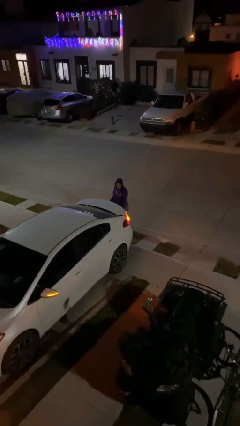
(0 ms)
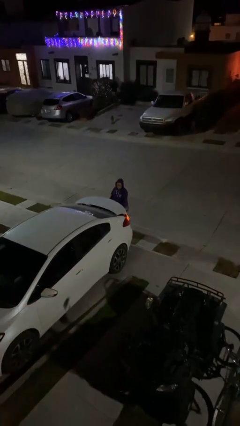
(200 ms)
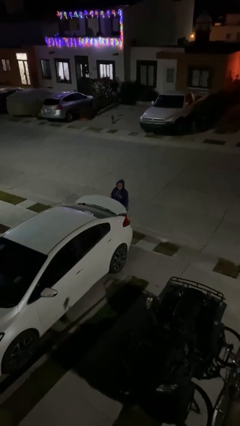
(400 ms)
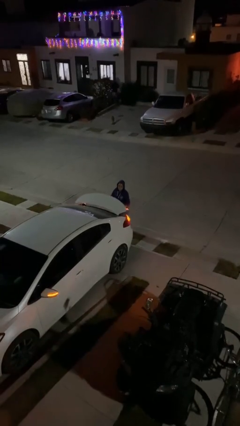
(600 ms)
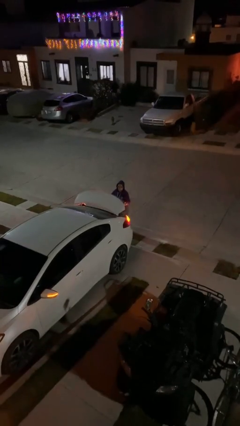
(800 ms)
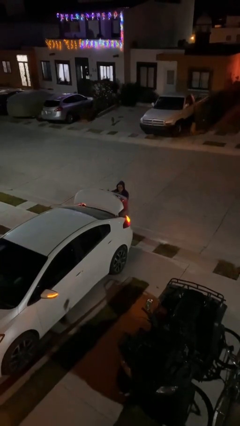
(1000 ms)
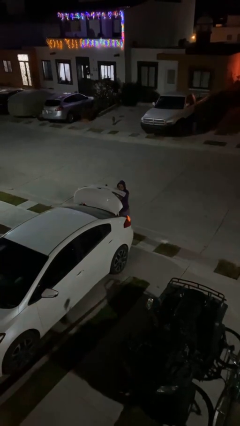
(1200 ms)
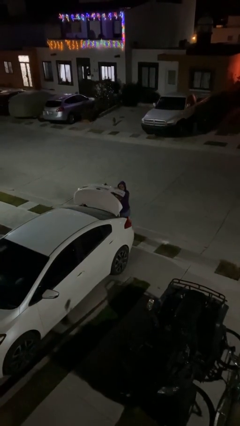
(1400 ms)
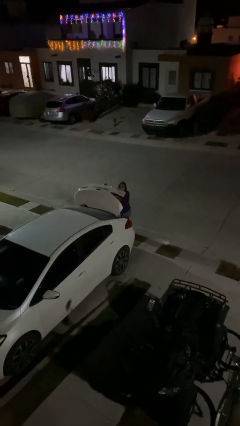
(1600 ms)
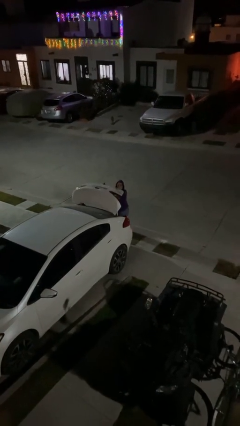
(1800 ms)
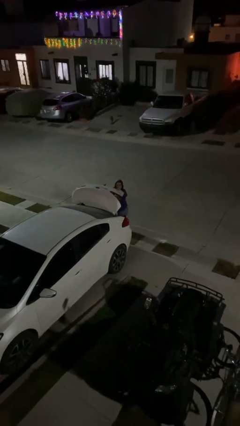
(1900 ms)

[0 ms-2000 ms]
person opens car trunk

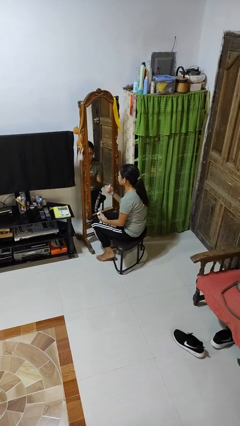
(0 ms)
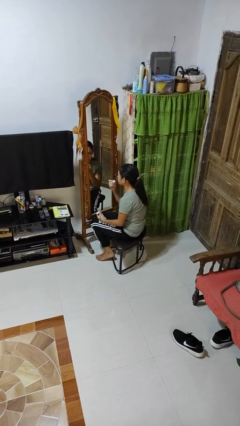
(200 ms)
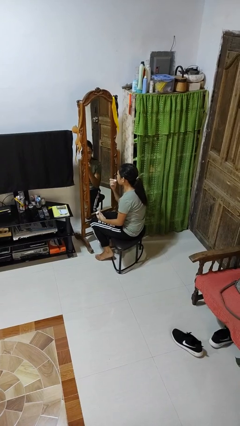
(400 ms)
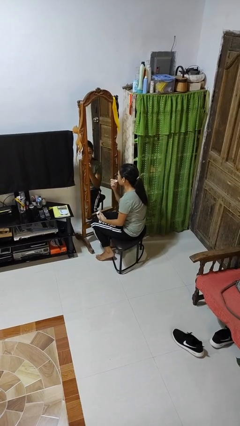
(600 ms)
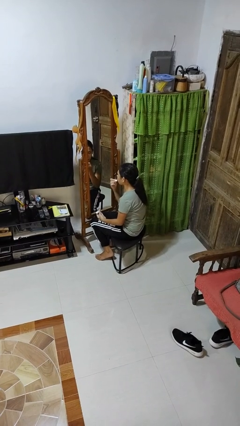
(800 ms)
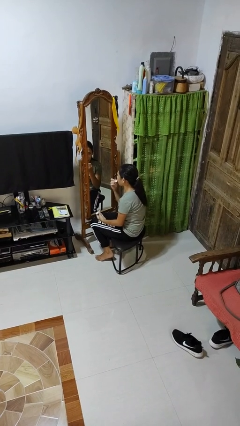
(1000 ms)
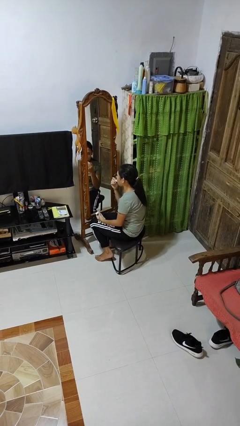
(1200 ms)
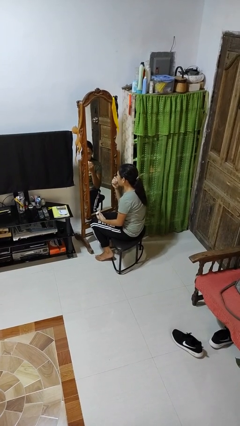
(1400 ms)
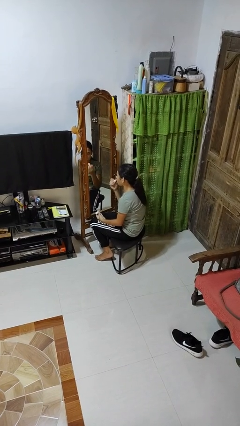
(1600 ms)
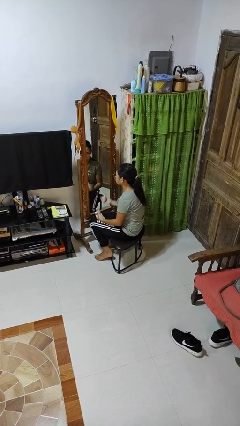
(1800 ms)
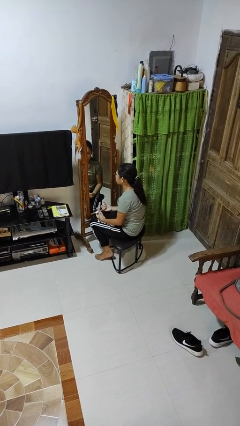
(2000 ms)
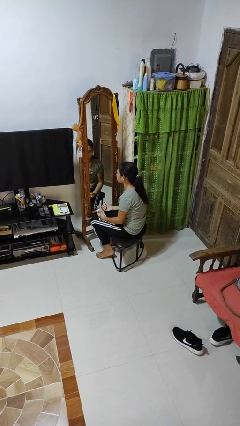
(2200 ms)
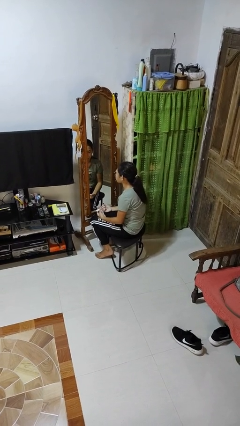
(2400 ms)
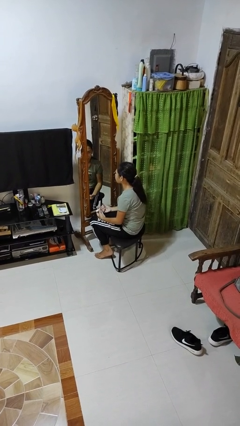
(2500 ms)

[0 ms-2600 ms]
person applies lip makeup

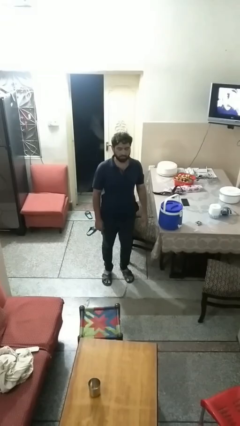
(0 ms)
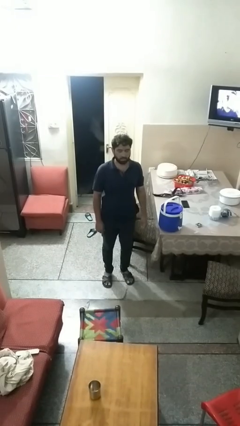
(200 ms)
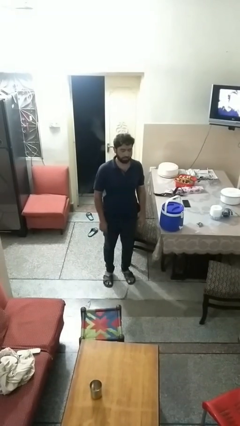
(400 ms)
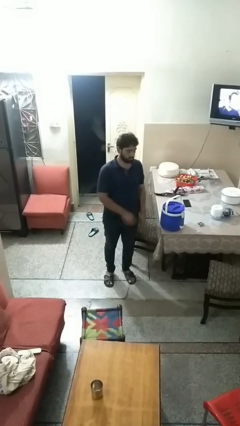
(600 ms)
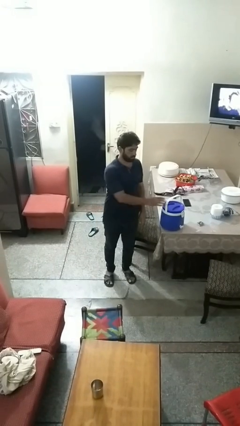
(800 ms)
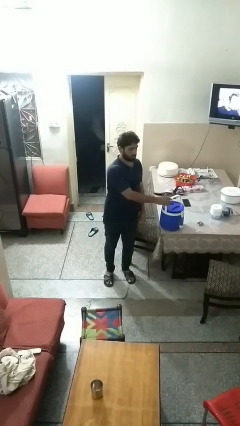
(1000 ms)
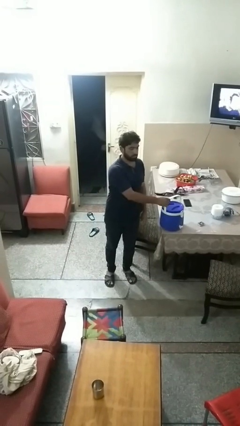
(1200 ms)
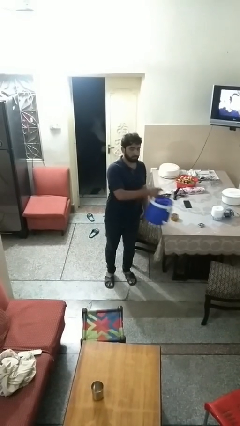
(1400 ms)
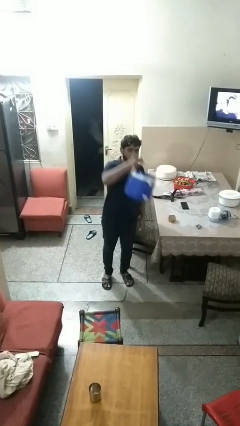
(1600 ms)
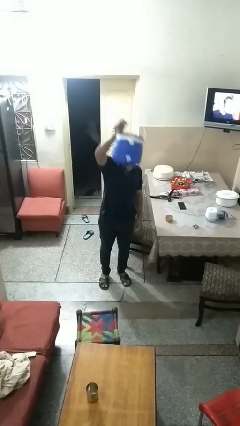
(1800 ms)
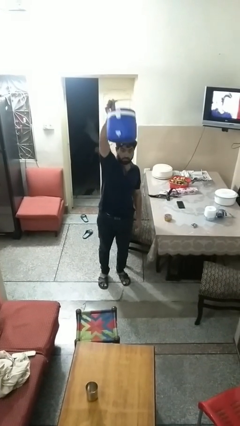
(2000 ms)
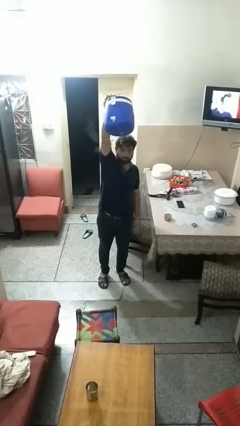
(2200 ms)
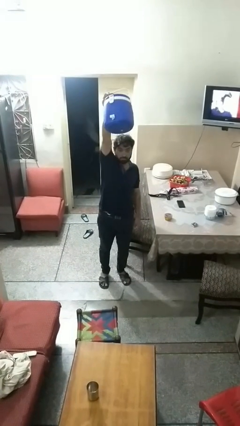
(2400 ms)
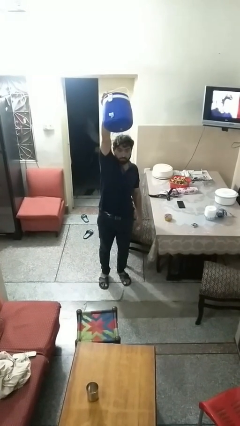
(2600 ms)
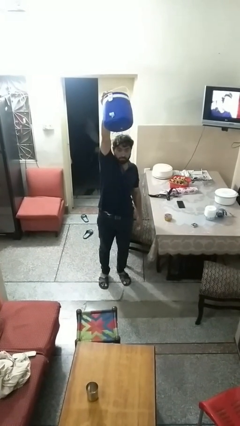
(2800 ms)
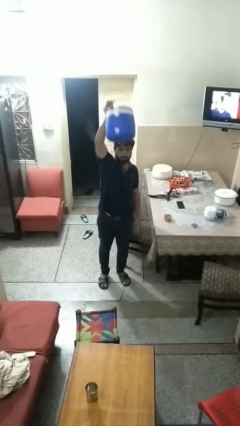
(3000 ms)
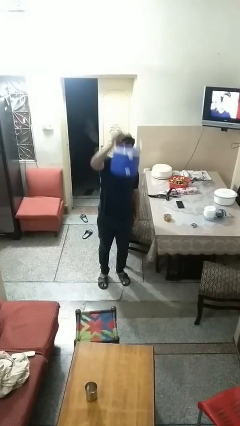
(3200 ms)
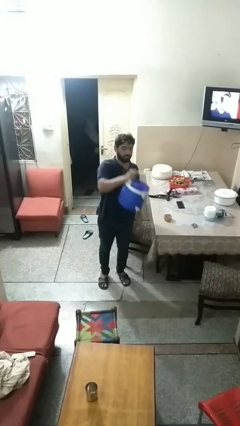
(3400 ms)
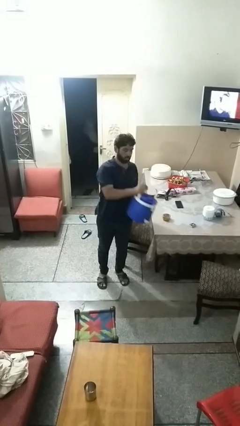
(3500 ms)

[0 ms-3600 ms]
person holds object above head

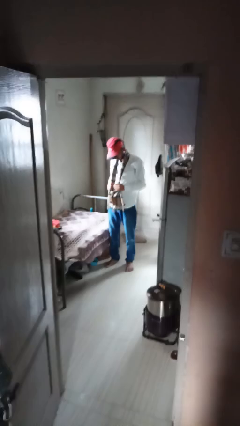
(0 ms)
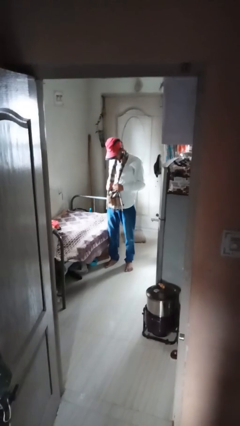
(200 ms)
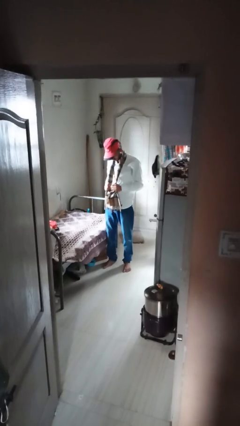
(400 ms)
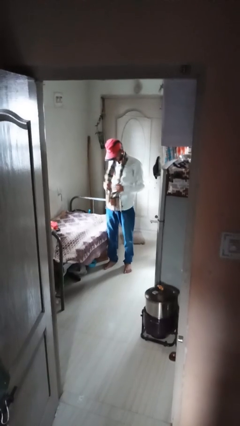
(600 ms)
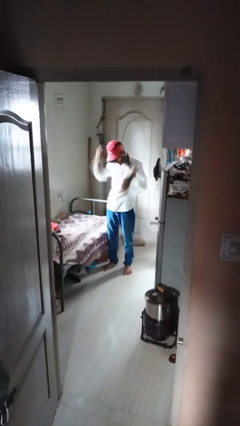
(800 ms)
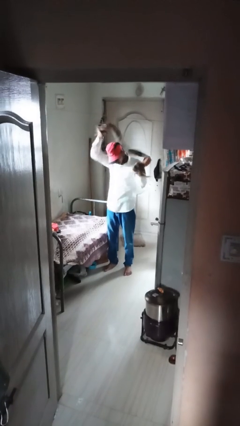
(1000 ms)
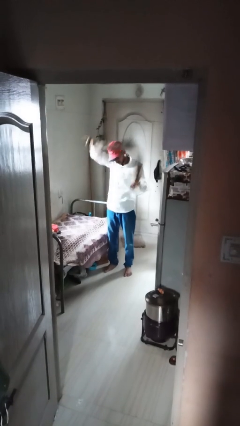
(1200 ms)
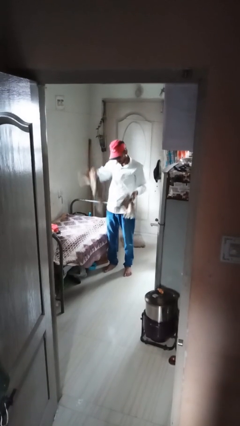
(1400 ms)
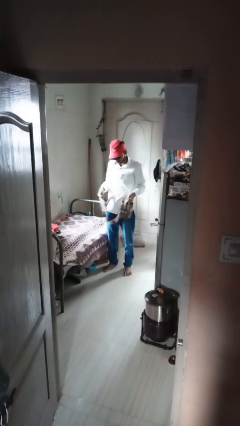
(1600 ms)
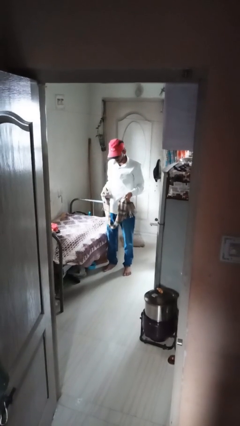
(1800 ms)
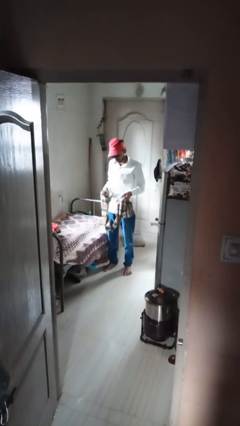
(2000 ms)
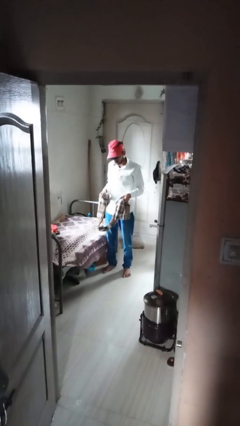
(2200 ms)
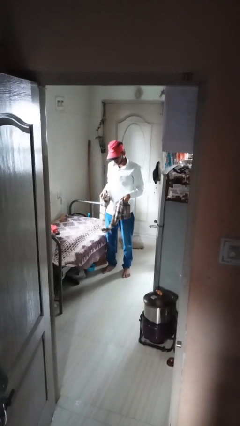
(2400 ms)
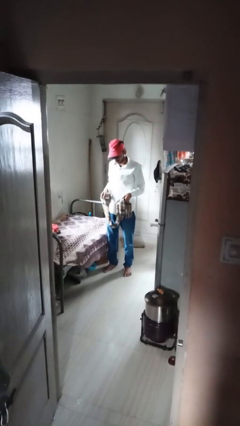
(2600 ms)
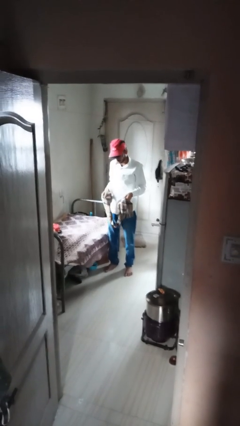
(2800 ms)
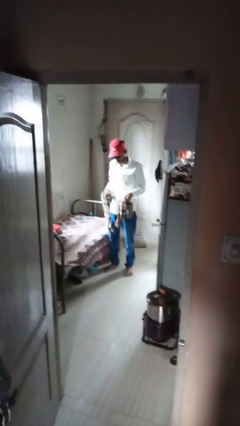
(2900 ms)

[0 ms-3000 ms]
person takes off scarf

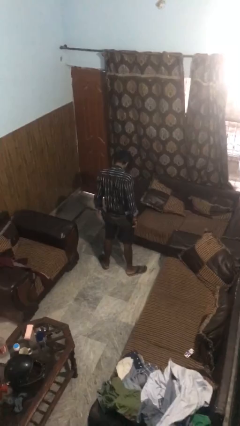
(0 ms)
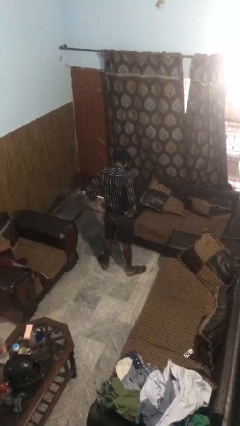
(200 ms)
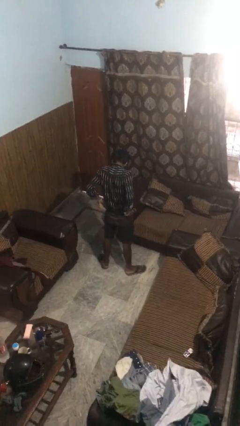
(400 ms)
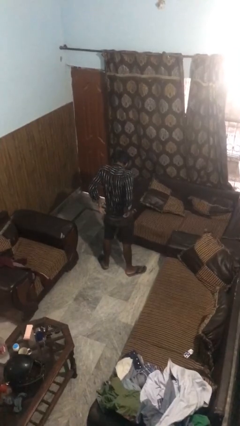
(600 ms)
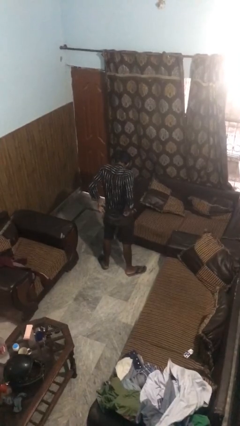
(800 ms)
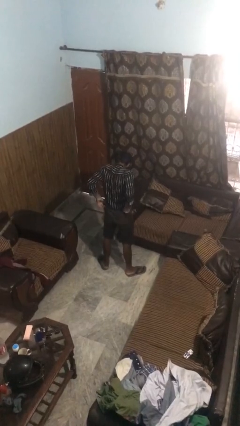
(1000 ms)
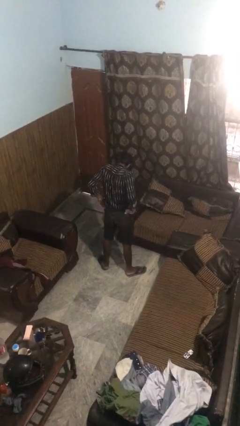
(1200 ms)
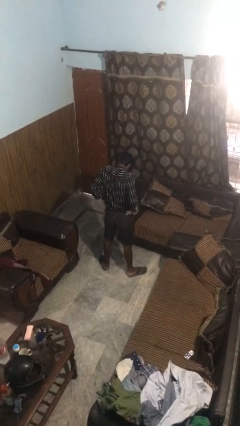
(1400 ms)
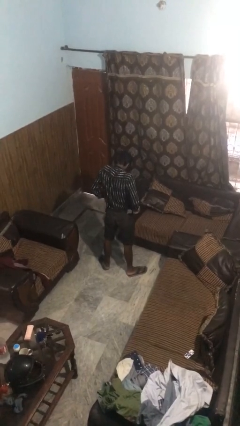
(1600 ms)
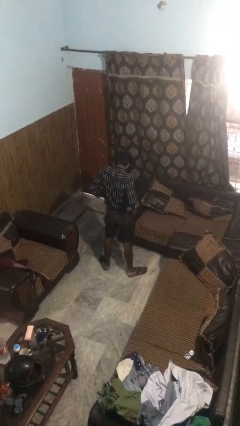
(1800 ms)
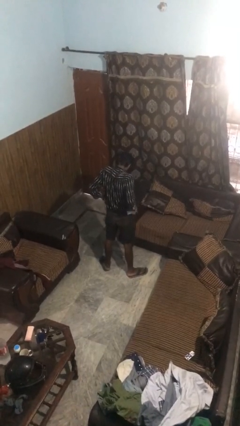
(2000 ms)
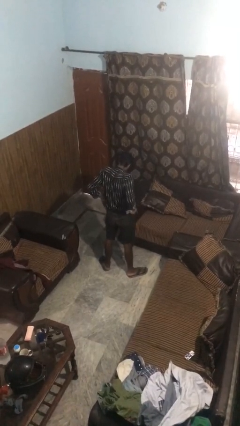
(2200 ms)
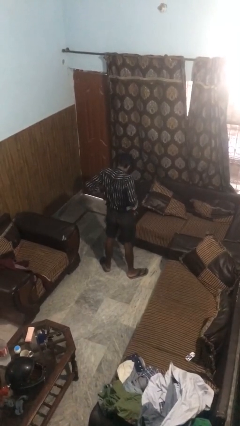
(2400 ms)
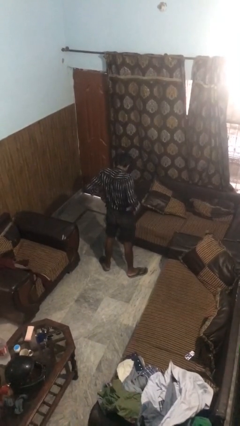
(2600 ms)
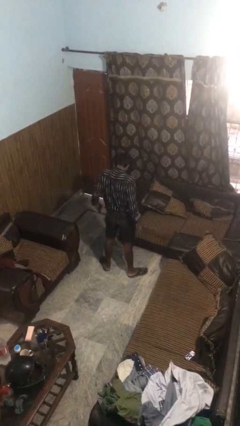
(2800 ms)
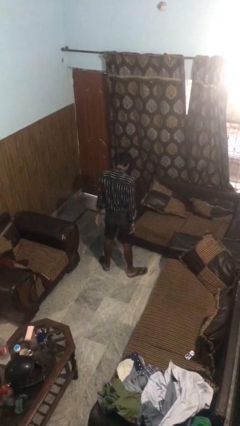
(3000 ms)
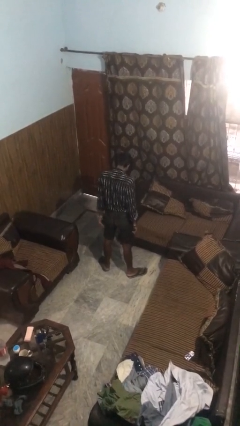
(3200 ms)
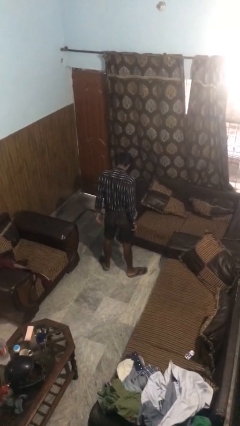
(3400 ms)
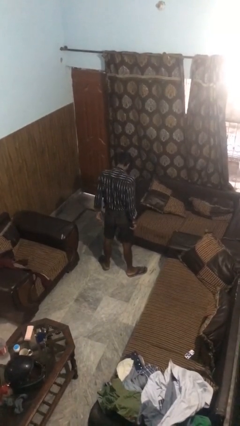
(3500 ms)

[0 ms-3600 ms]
person hikes up pants

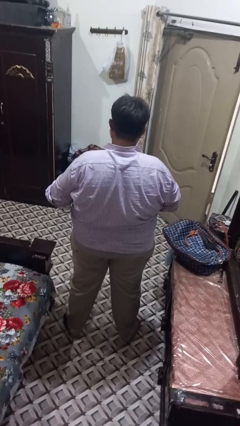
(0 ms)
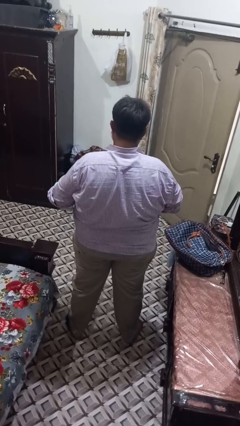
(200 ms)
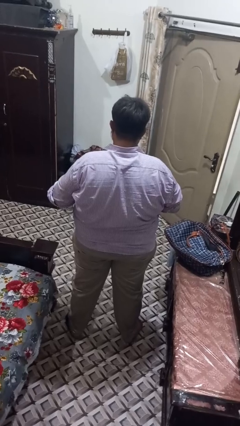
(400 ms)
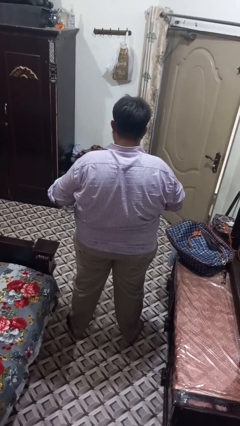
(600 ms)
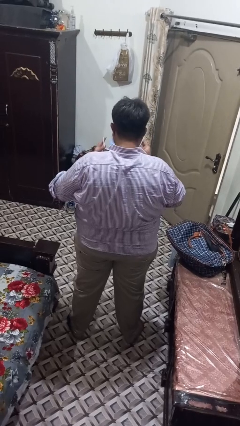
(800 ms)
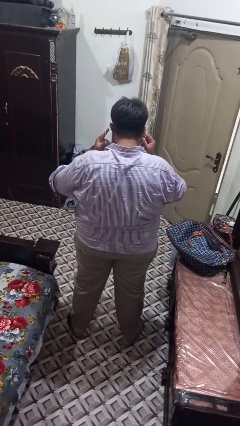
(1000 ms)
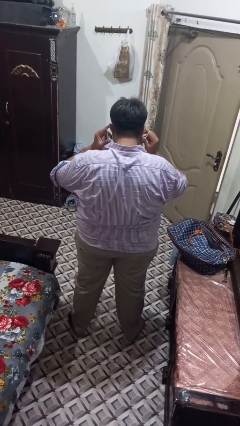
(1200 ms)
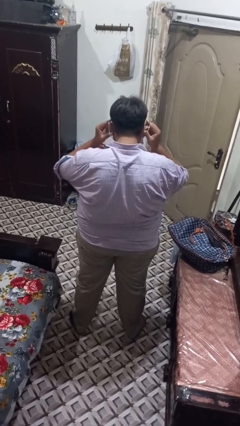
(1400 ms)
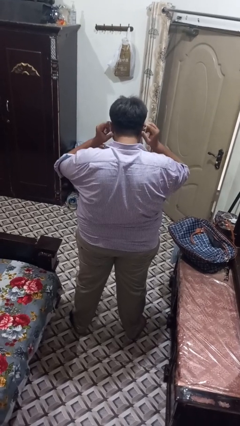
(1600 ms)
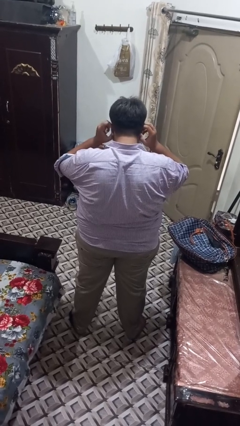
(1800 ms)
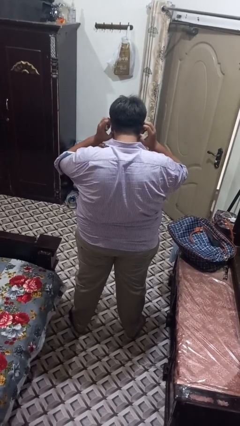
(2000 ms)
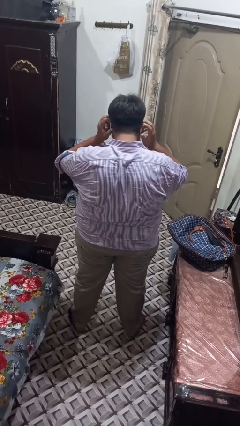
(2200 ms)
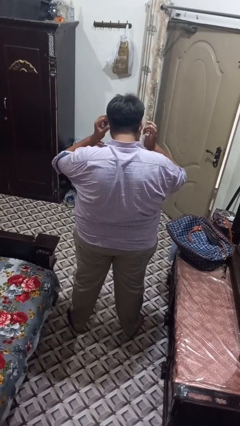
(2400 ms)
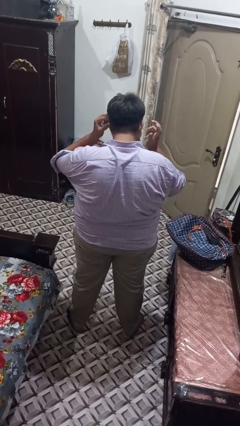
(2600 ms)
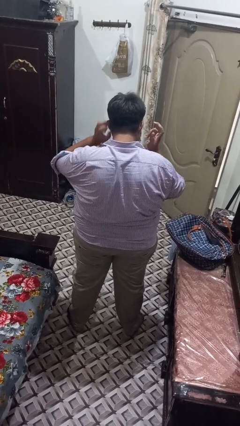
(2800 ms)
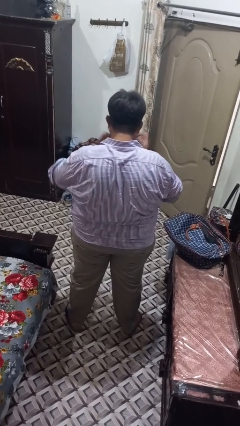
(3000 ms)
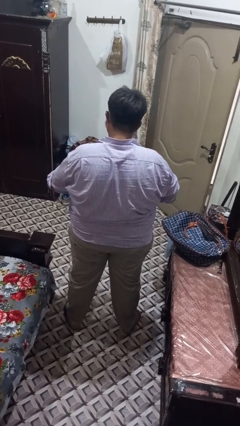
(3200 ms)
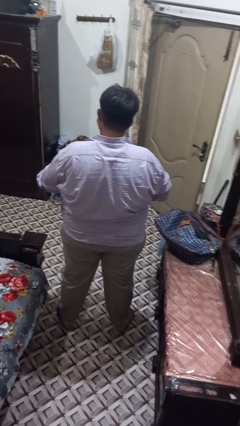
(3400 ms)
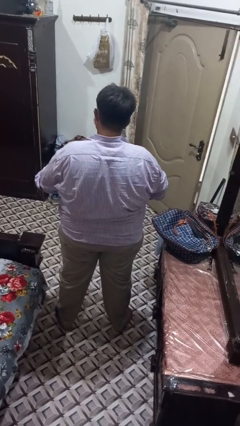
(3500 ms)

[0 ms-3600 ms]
person puts on facemask
